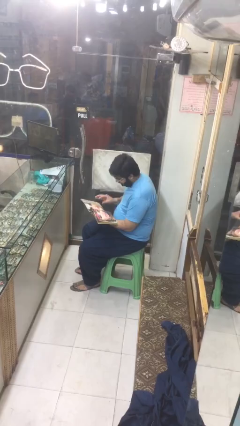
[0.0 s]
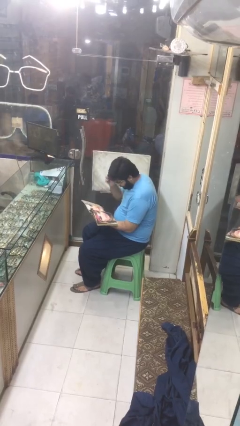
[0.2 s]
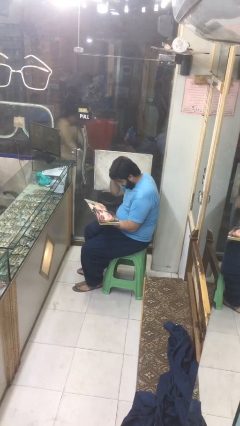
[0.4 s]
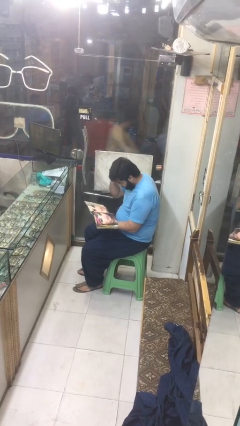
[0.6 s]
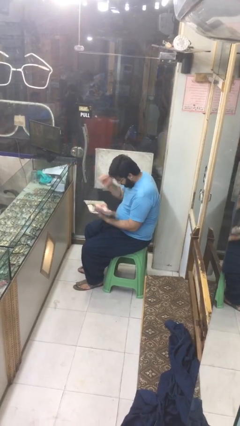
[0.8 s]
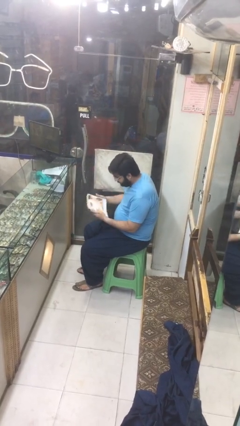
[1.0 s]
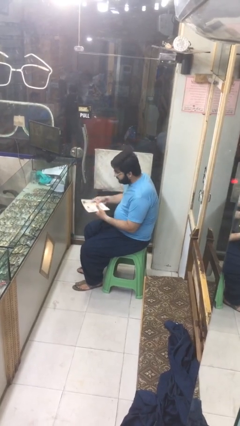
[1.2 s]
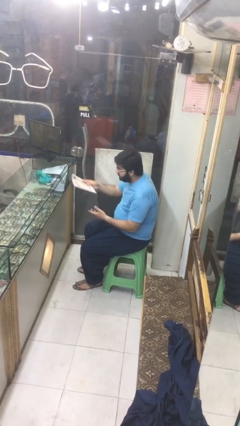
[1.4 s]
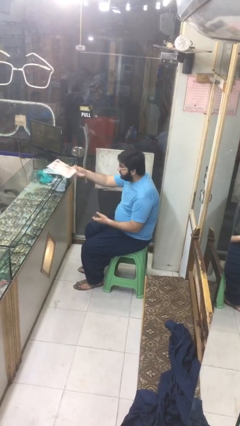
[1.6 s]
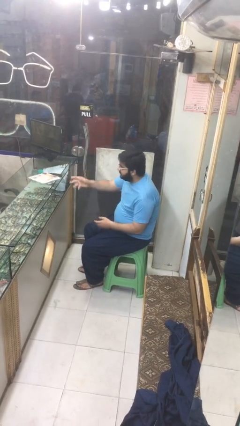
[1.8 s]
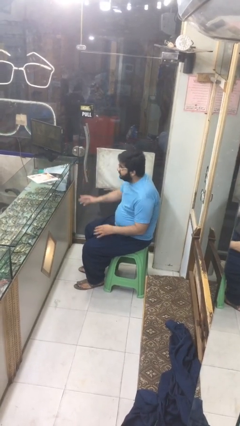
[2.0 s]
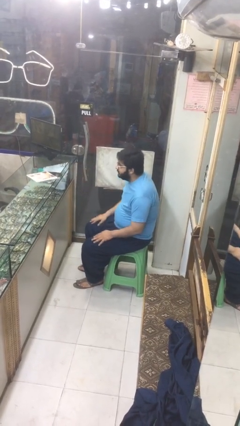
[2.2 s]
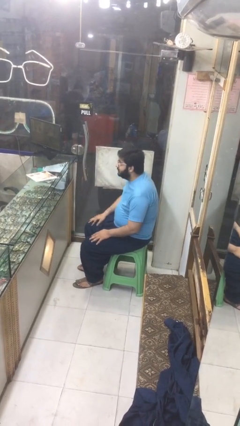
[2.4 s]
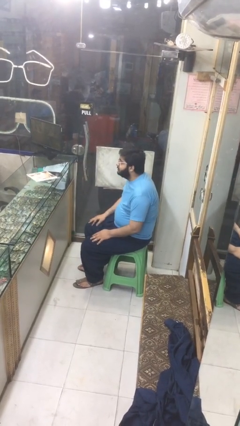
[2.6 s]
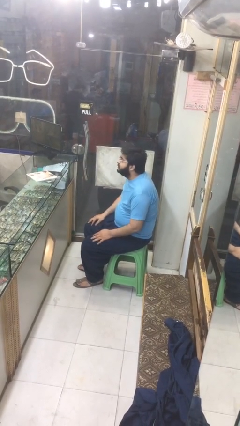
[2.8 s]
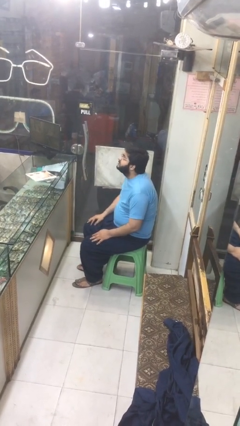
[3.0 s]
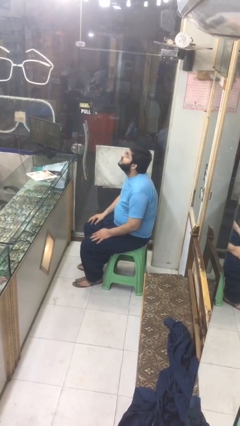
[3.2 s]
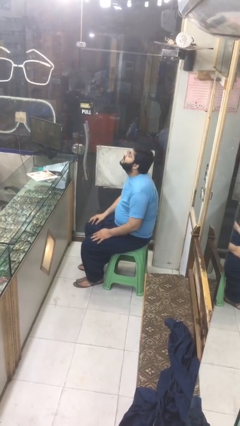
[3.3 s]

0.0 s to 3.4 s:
person puts down object on table

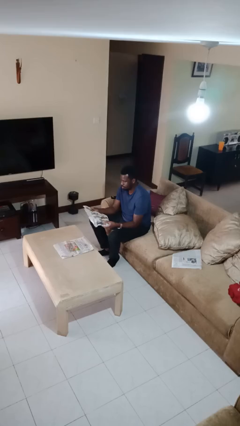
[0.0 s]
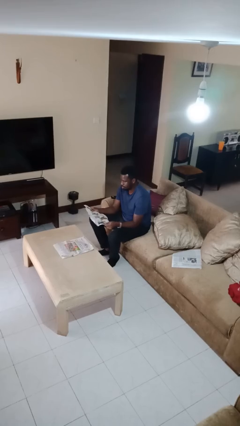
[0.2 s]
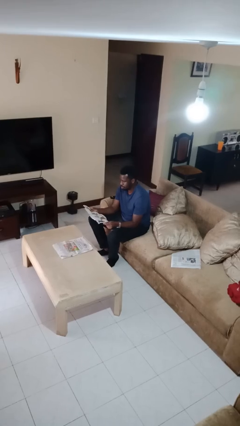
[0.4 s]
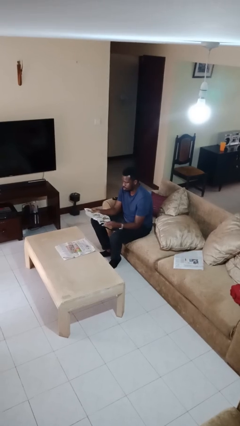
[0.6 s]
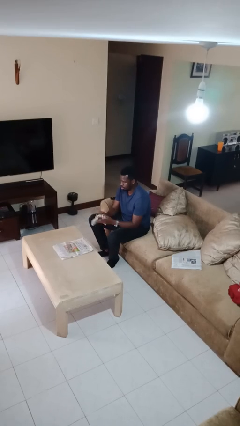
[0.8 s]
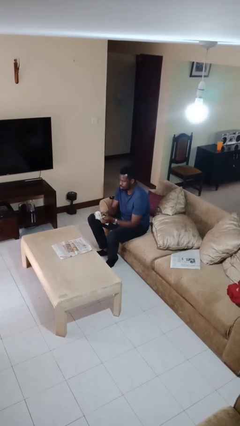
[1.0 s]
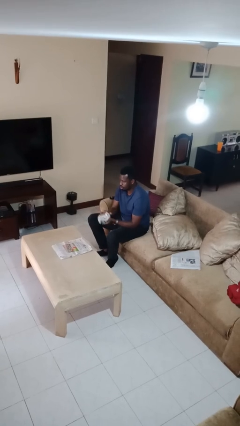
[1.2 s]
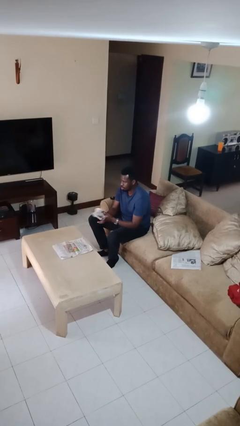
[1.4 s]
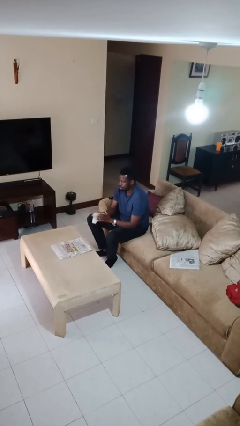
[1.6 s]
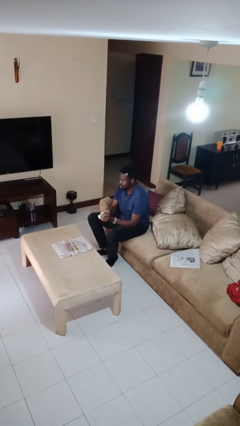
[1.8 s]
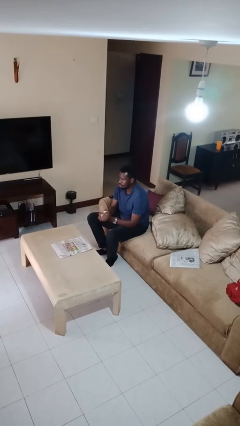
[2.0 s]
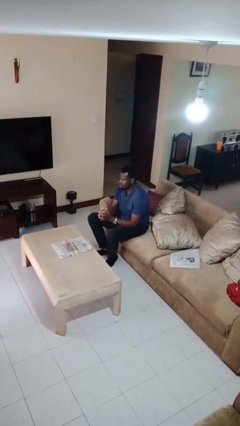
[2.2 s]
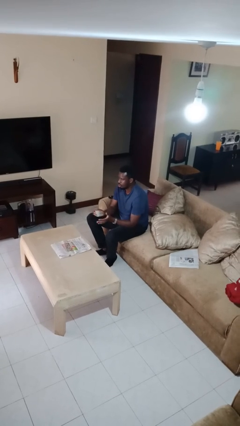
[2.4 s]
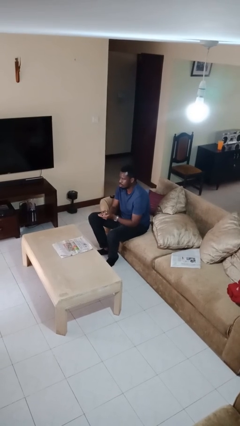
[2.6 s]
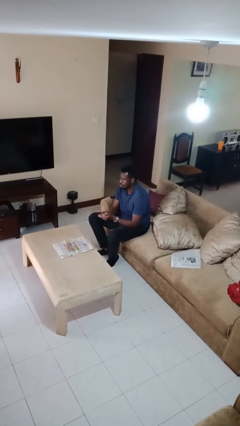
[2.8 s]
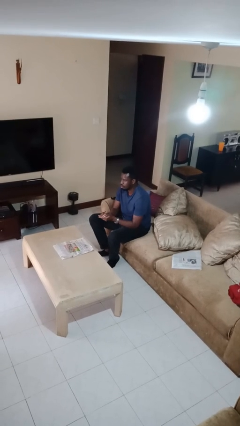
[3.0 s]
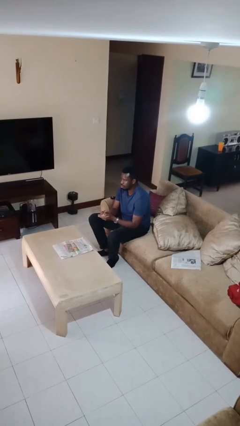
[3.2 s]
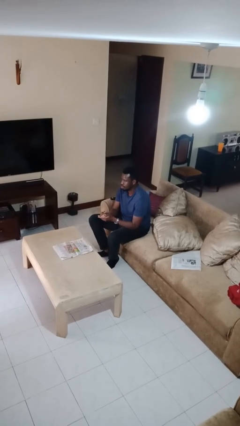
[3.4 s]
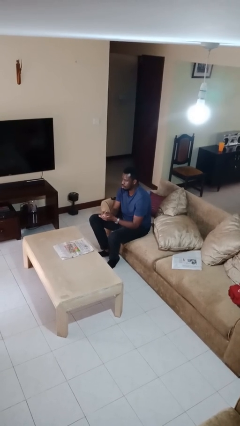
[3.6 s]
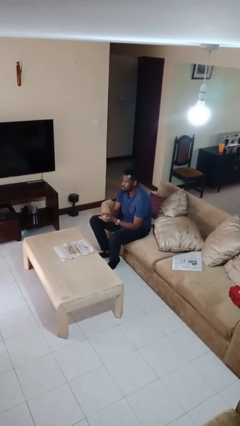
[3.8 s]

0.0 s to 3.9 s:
person crumples paper

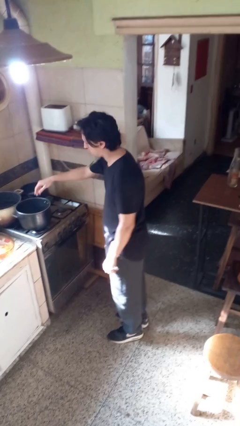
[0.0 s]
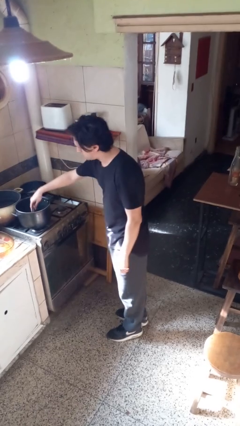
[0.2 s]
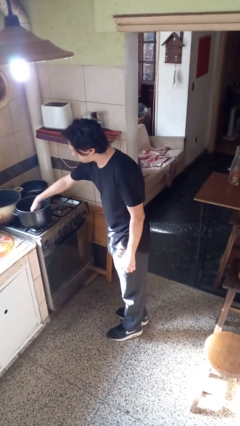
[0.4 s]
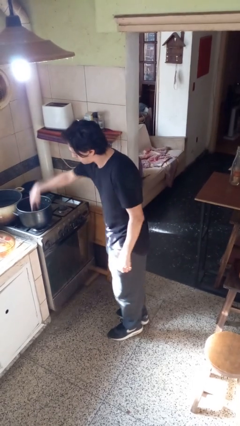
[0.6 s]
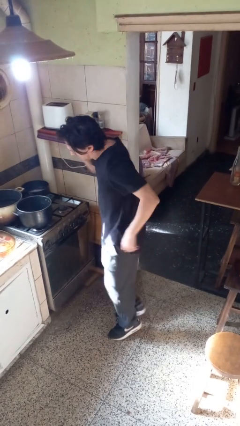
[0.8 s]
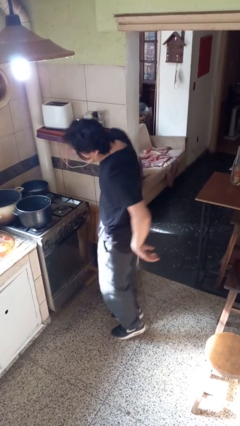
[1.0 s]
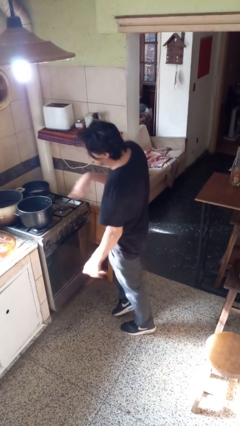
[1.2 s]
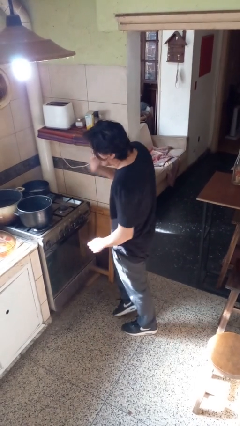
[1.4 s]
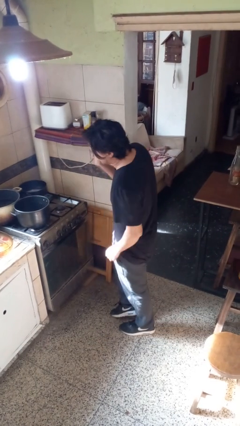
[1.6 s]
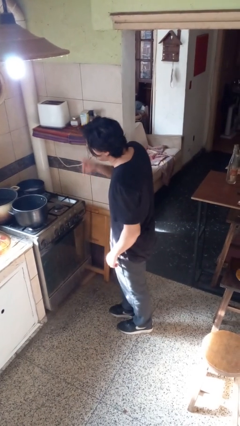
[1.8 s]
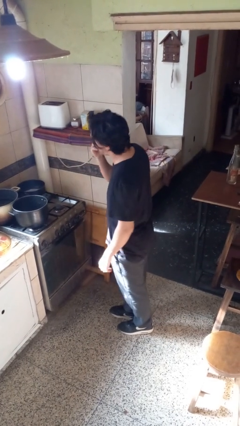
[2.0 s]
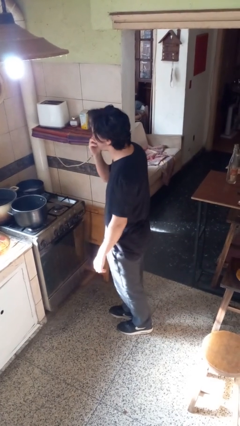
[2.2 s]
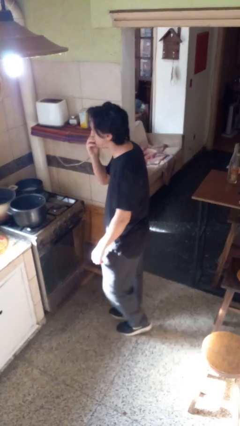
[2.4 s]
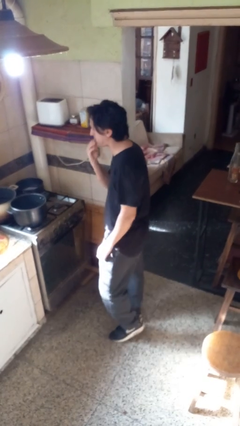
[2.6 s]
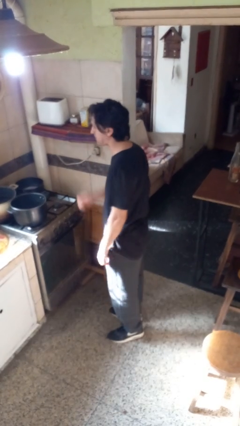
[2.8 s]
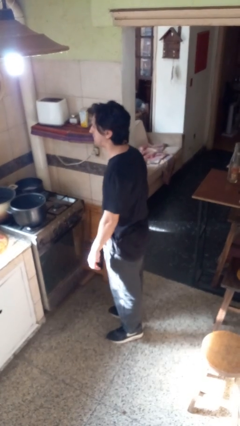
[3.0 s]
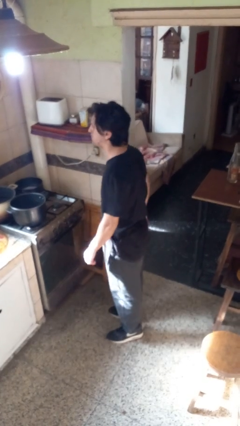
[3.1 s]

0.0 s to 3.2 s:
person burns hand

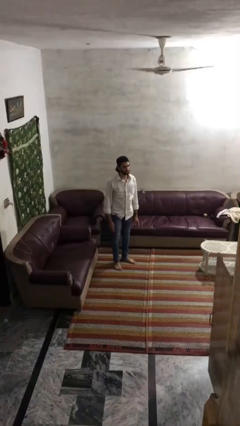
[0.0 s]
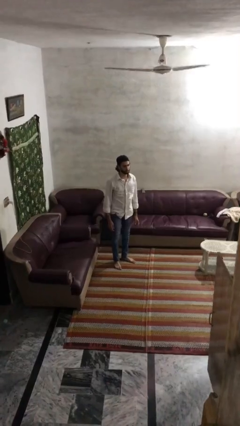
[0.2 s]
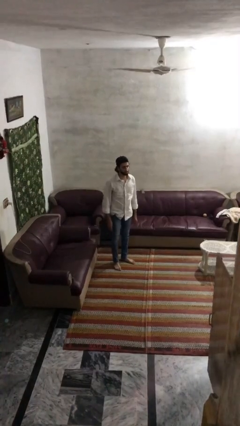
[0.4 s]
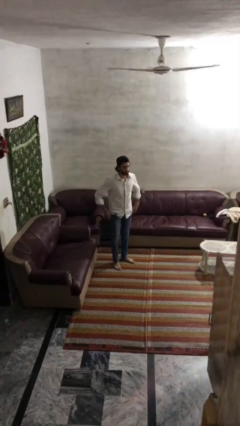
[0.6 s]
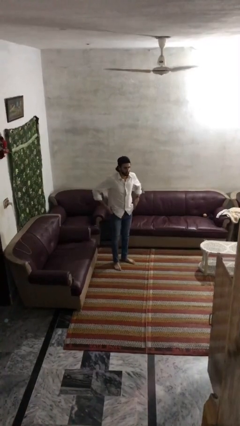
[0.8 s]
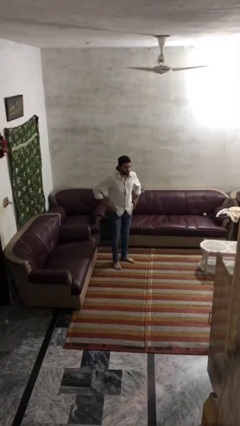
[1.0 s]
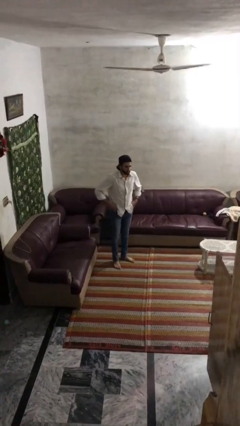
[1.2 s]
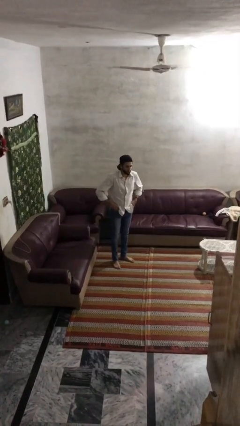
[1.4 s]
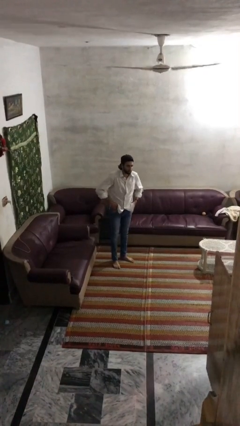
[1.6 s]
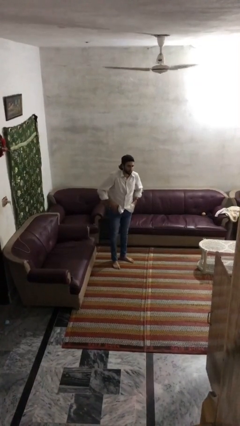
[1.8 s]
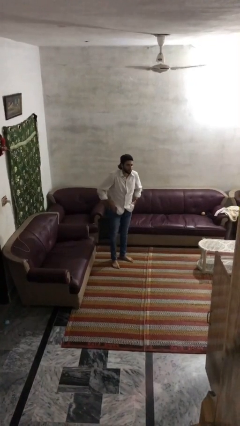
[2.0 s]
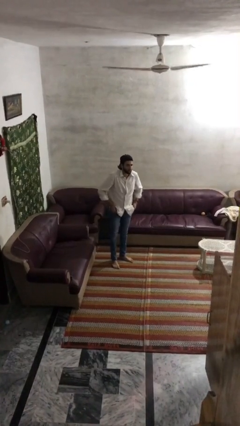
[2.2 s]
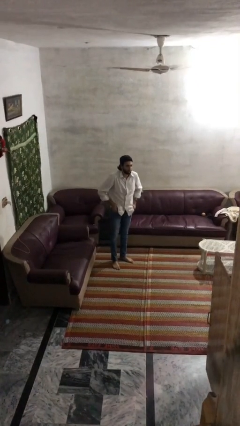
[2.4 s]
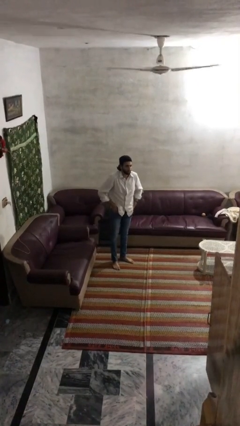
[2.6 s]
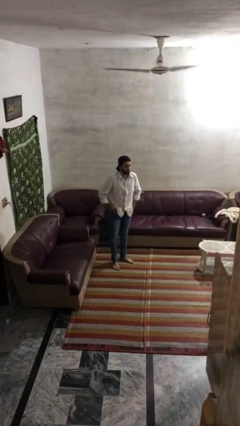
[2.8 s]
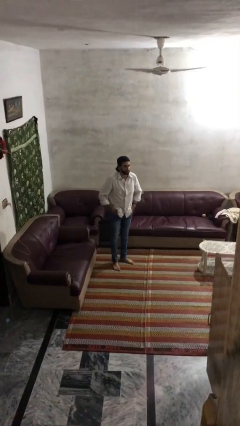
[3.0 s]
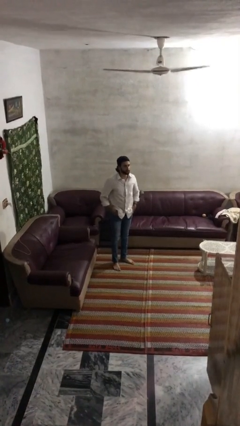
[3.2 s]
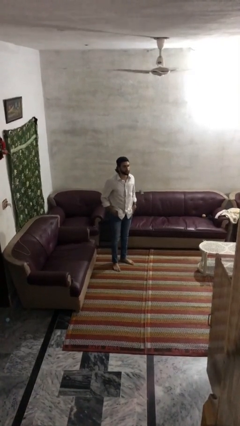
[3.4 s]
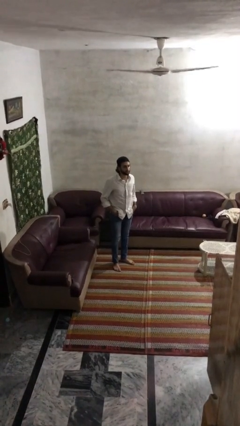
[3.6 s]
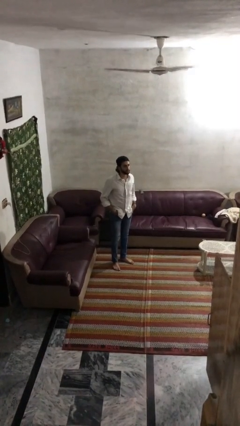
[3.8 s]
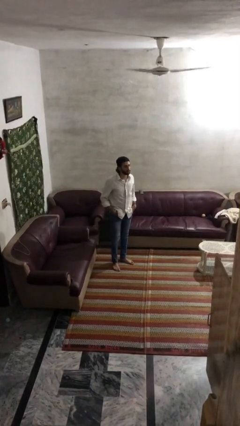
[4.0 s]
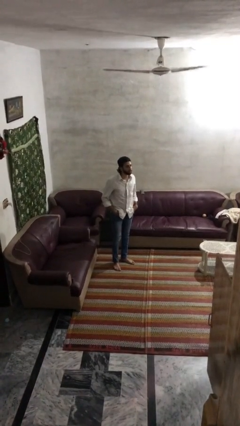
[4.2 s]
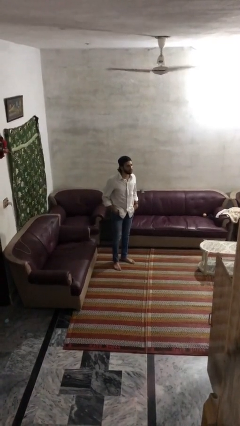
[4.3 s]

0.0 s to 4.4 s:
person puts hands in back pockets

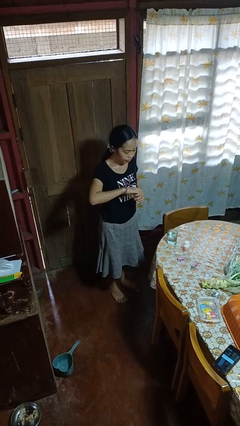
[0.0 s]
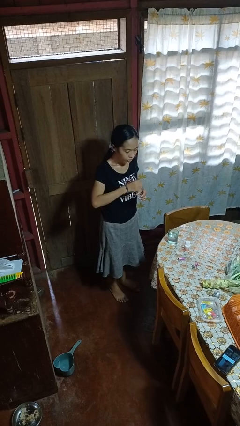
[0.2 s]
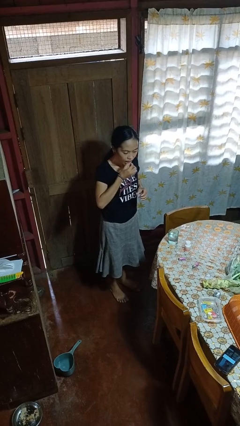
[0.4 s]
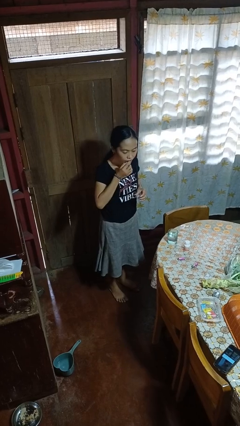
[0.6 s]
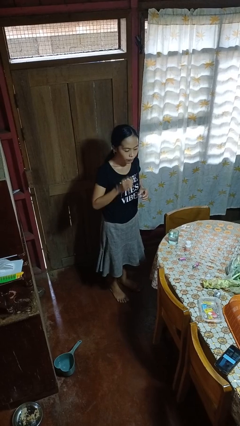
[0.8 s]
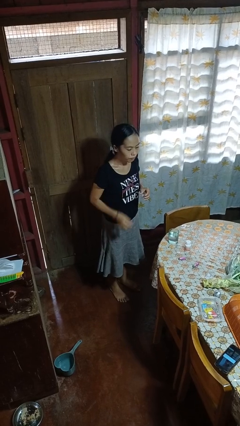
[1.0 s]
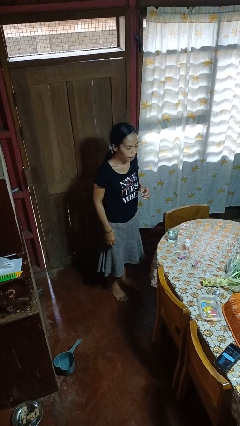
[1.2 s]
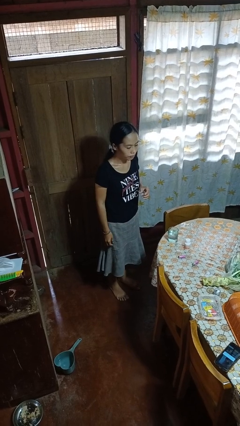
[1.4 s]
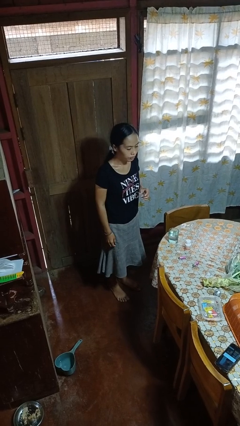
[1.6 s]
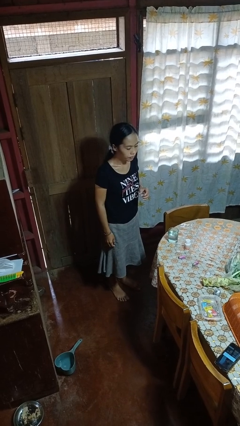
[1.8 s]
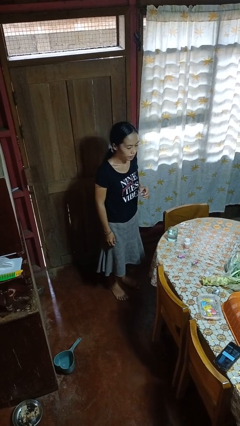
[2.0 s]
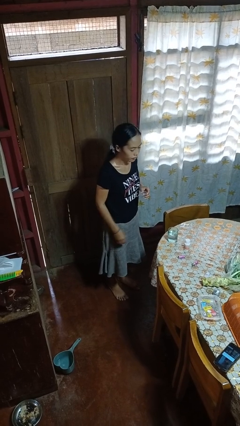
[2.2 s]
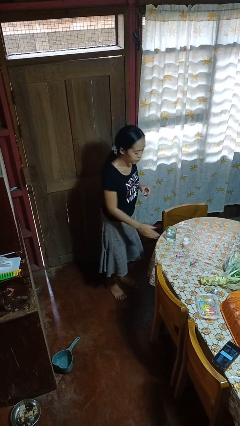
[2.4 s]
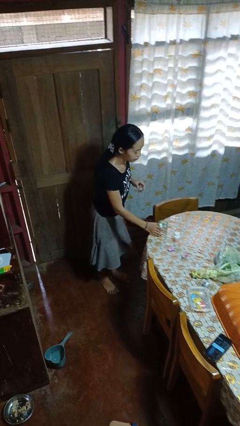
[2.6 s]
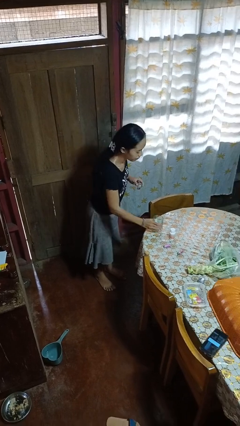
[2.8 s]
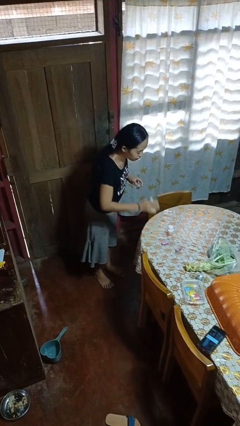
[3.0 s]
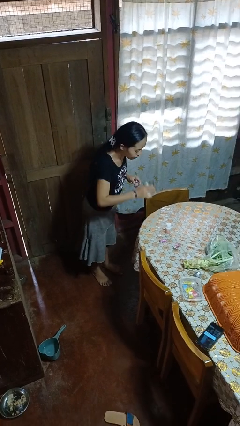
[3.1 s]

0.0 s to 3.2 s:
person takes medicine pills
